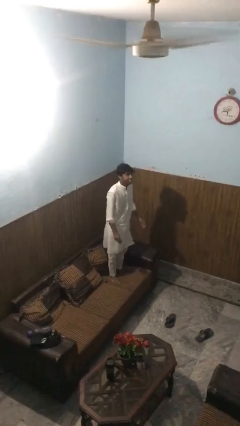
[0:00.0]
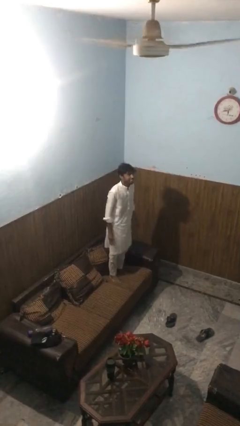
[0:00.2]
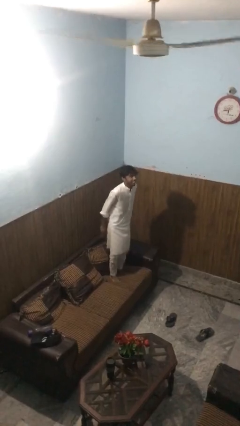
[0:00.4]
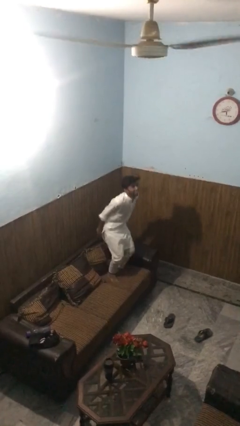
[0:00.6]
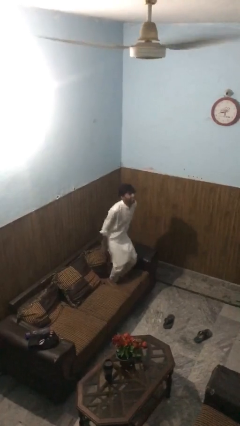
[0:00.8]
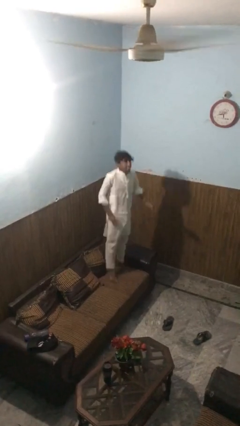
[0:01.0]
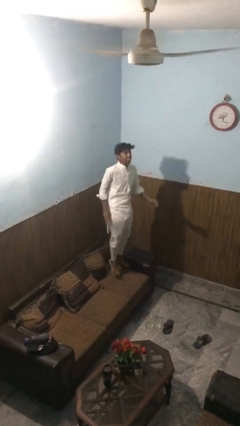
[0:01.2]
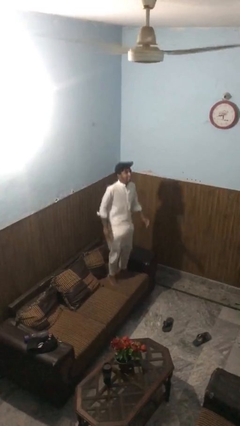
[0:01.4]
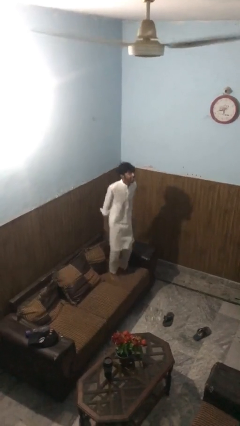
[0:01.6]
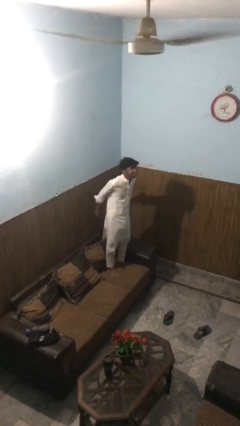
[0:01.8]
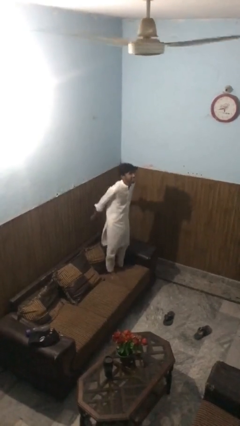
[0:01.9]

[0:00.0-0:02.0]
person jumps on couch

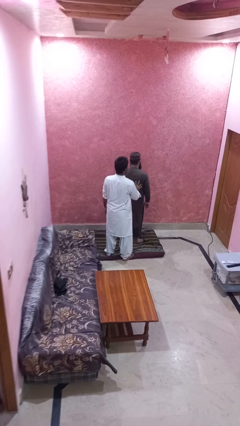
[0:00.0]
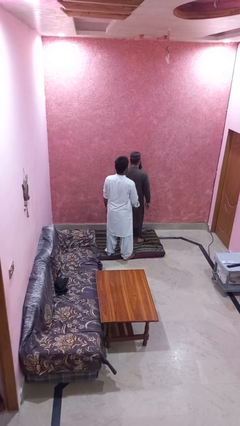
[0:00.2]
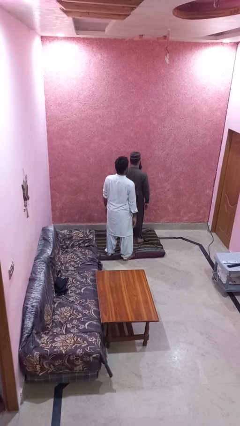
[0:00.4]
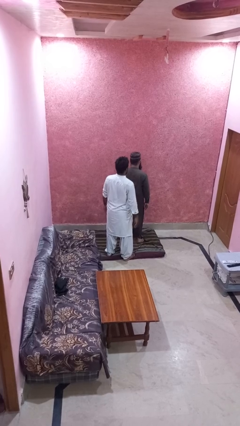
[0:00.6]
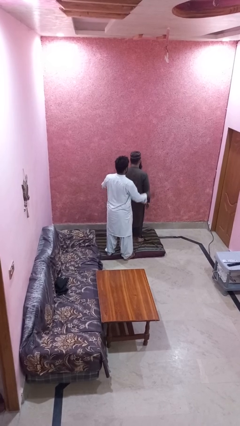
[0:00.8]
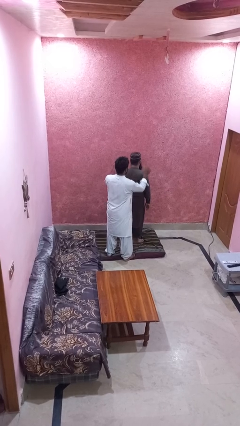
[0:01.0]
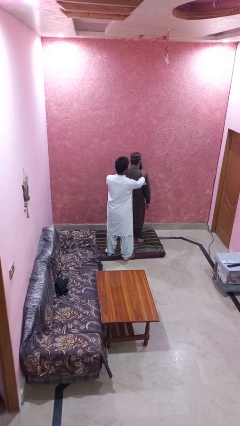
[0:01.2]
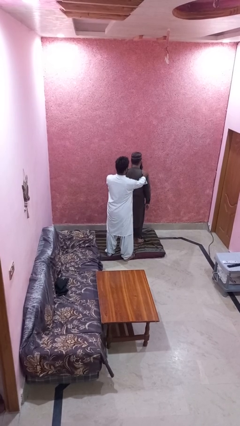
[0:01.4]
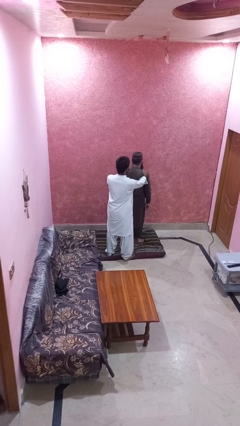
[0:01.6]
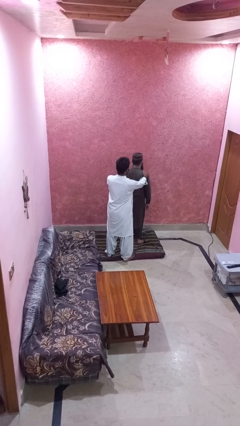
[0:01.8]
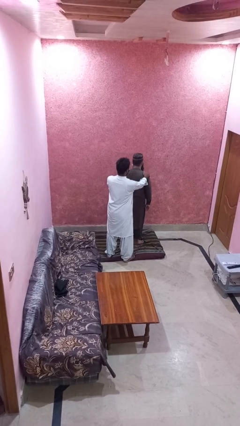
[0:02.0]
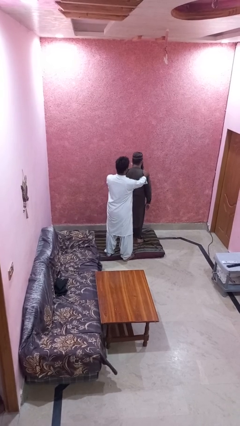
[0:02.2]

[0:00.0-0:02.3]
person grabs person by shoulder

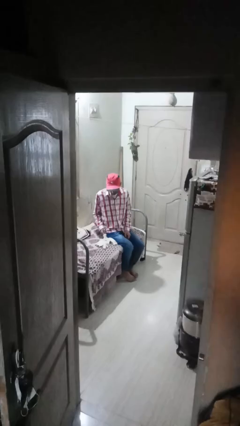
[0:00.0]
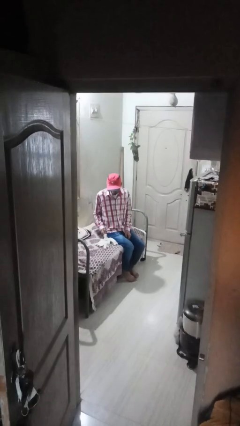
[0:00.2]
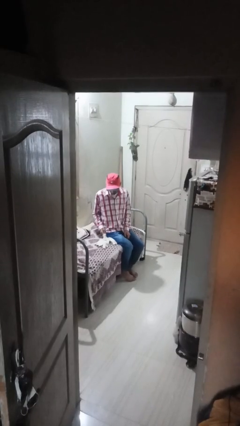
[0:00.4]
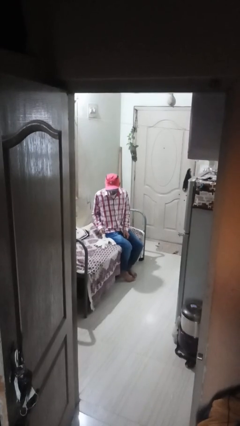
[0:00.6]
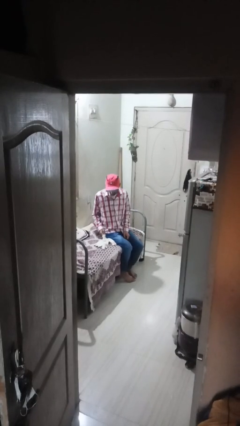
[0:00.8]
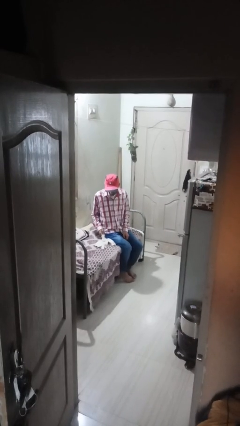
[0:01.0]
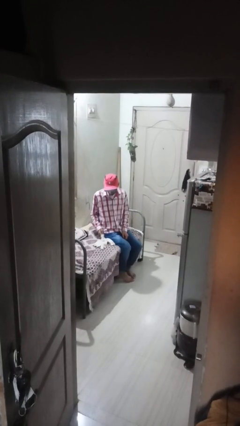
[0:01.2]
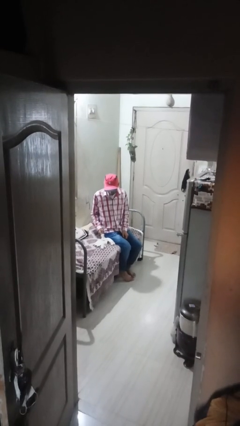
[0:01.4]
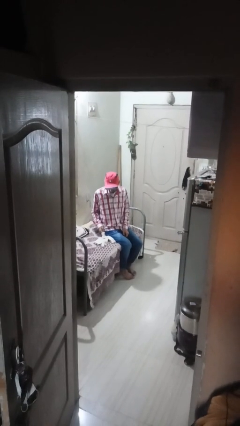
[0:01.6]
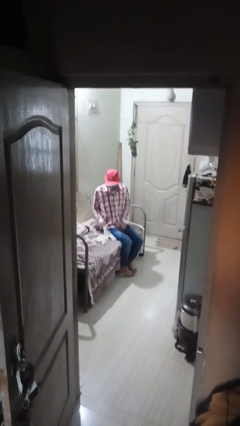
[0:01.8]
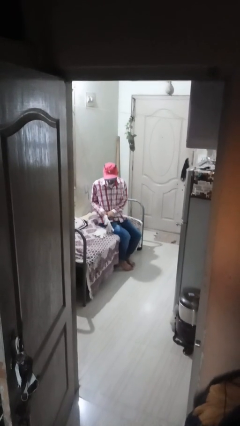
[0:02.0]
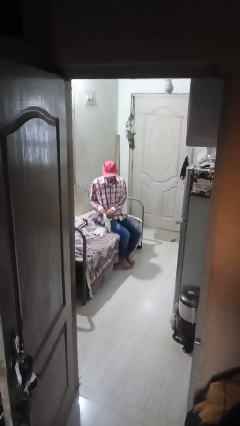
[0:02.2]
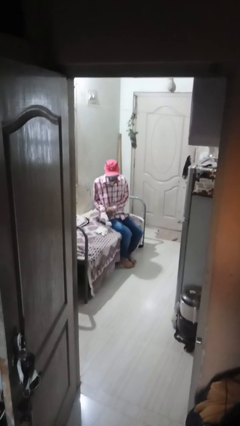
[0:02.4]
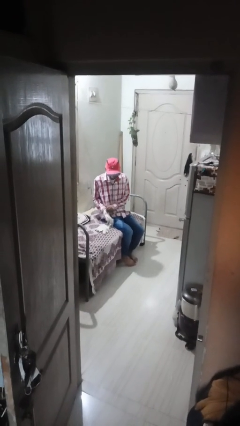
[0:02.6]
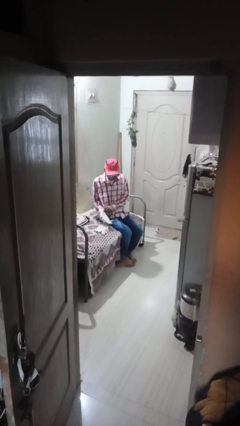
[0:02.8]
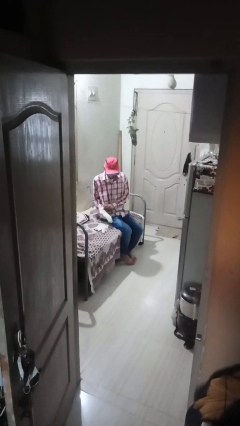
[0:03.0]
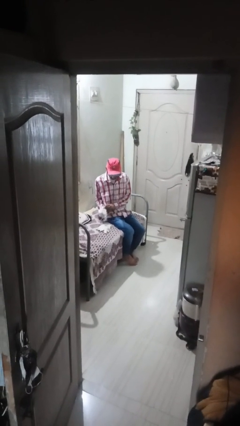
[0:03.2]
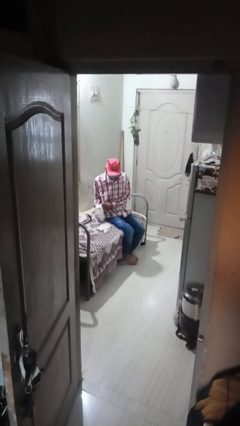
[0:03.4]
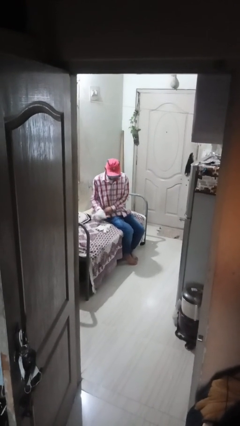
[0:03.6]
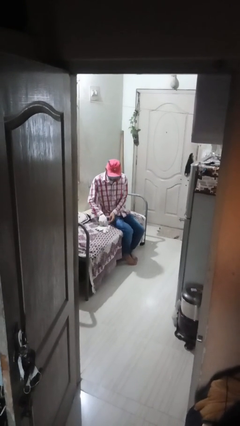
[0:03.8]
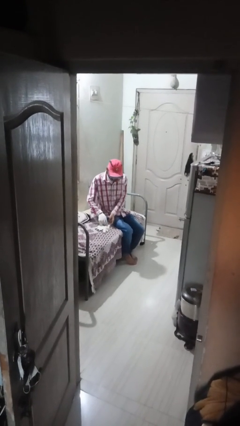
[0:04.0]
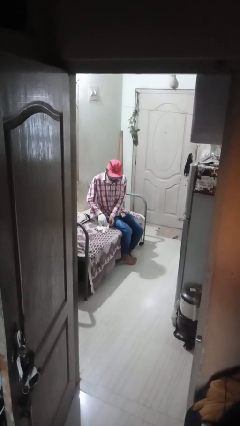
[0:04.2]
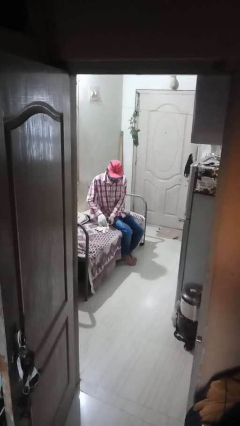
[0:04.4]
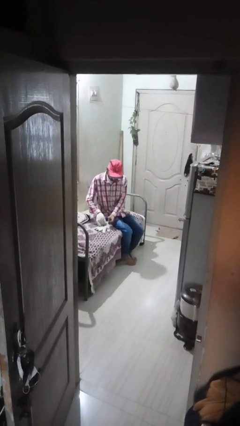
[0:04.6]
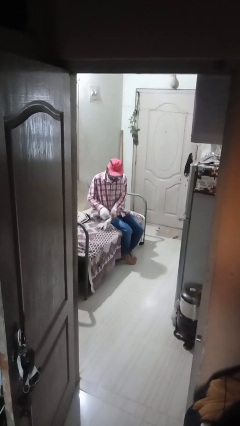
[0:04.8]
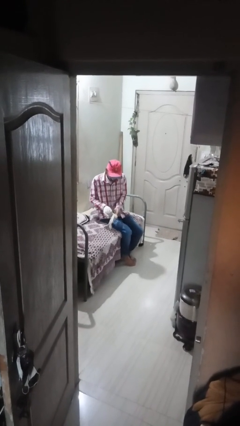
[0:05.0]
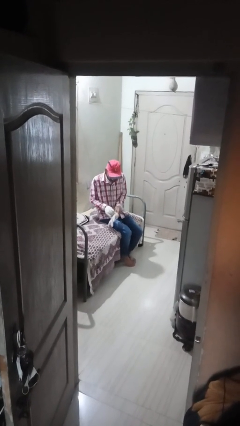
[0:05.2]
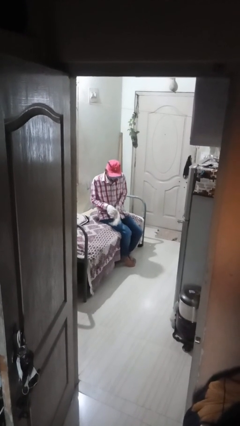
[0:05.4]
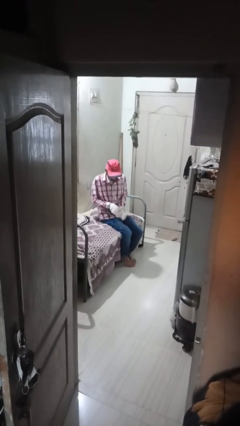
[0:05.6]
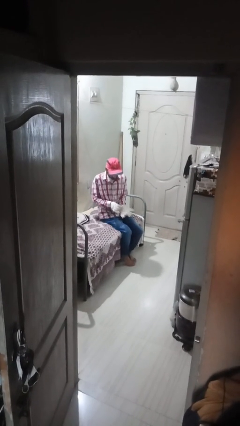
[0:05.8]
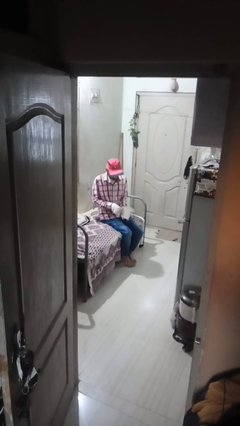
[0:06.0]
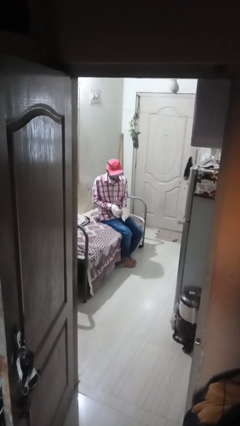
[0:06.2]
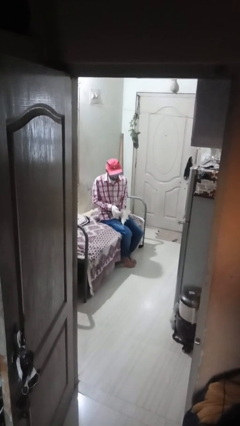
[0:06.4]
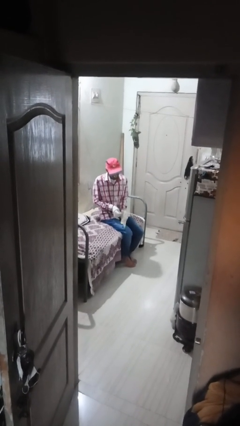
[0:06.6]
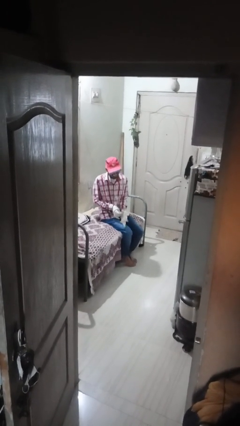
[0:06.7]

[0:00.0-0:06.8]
person puts on gloves

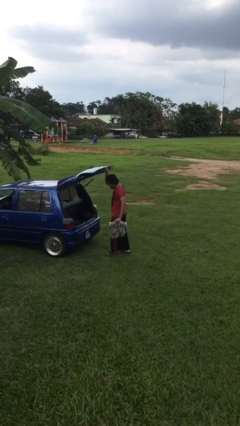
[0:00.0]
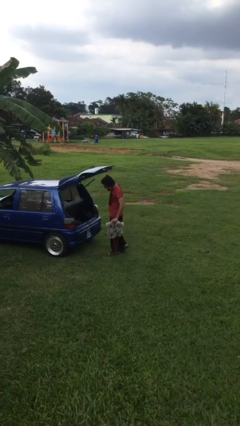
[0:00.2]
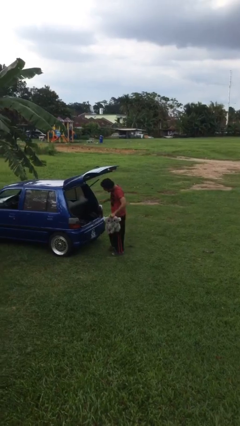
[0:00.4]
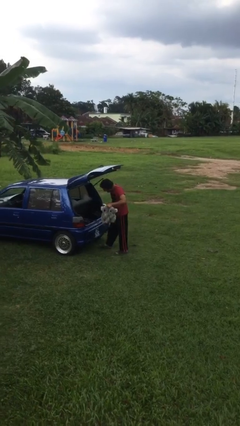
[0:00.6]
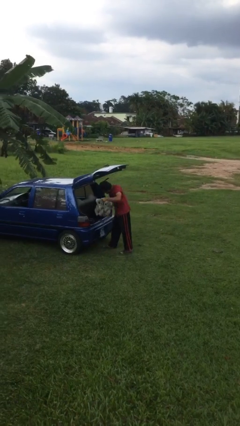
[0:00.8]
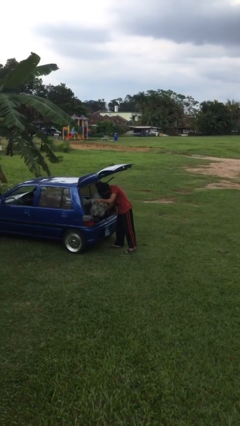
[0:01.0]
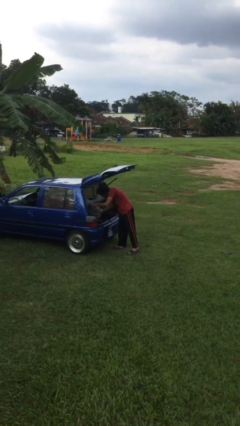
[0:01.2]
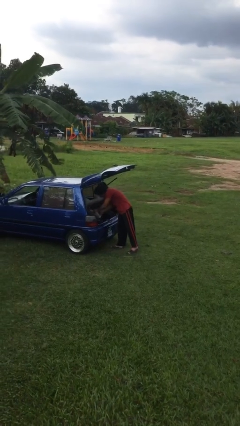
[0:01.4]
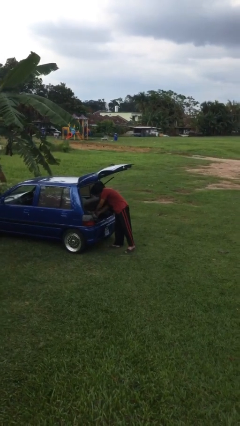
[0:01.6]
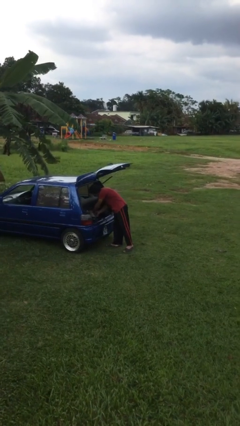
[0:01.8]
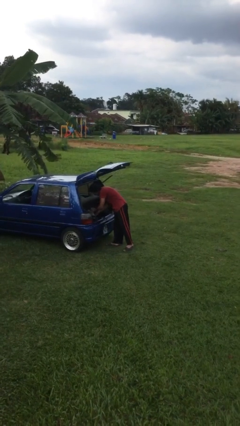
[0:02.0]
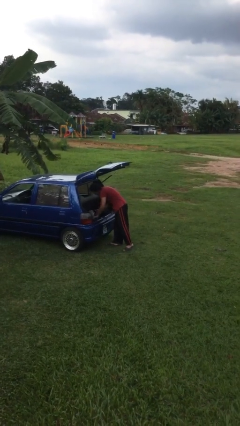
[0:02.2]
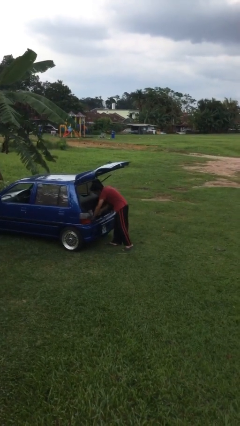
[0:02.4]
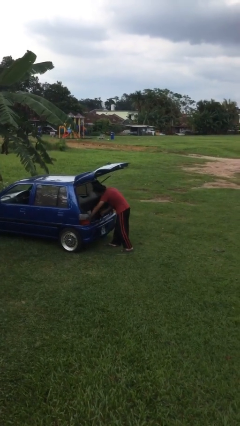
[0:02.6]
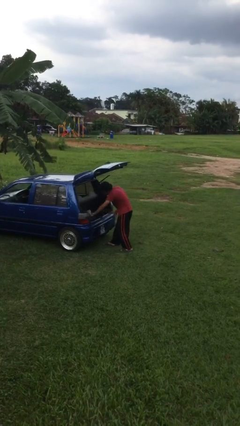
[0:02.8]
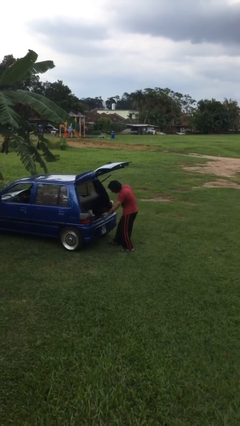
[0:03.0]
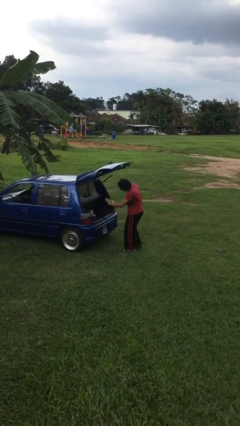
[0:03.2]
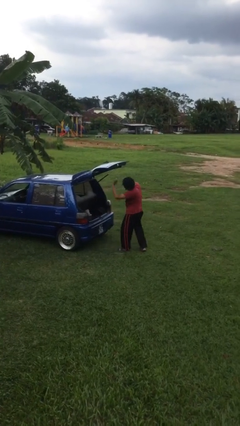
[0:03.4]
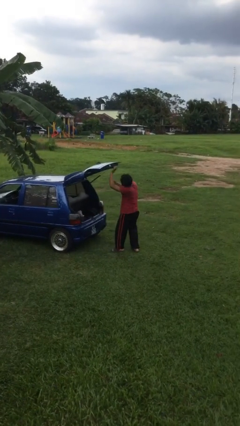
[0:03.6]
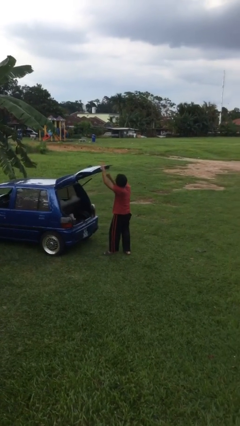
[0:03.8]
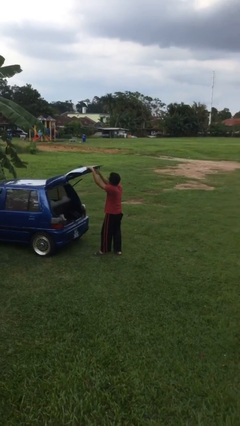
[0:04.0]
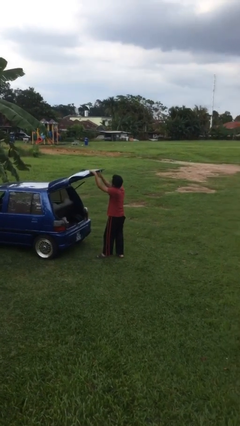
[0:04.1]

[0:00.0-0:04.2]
person loads car

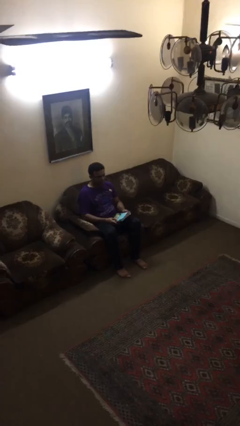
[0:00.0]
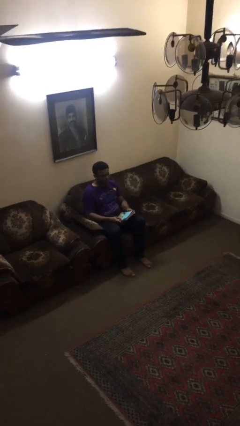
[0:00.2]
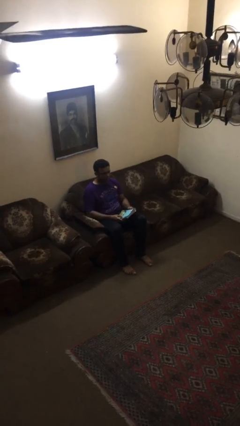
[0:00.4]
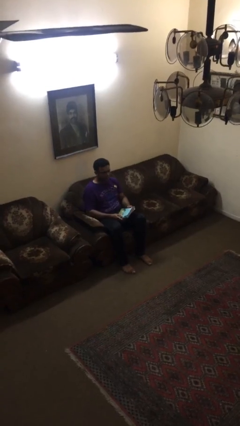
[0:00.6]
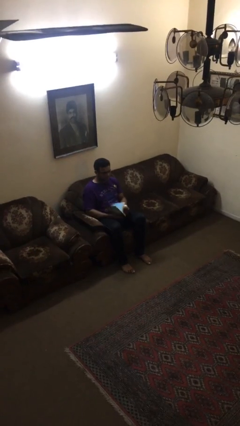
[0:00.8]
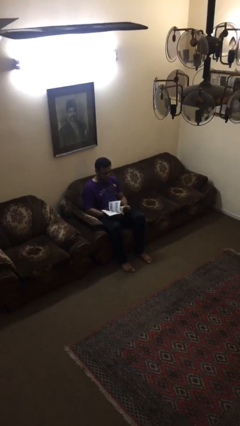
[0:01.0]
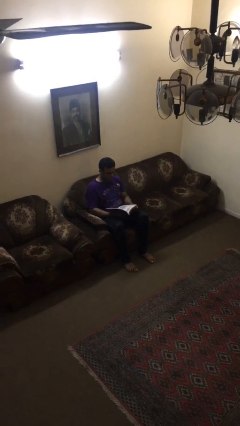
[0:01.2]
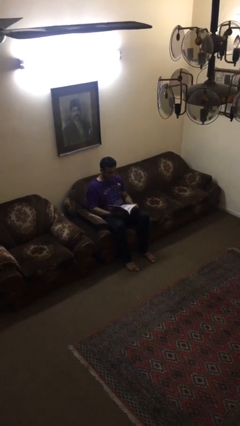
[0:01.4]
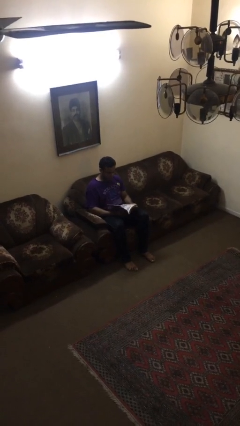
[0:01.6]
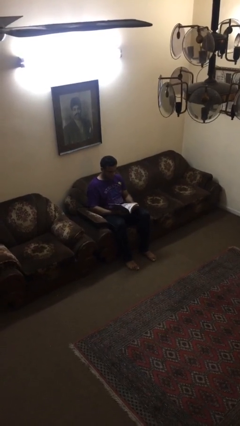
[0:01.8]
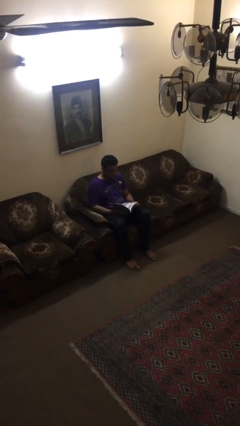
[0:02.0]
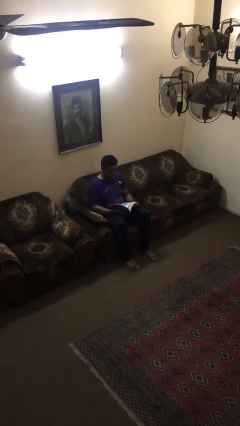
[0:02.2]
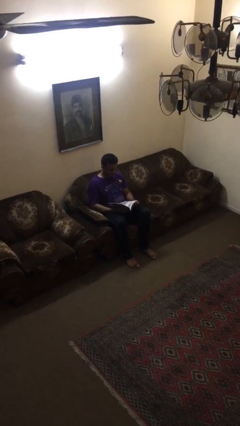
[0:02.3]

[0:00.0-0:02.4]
person reads document

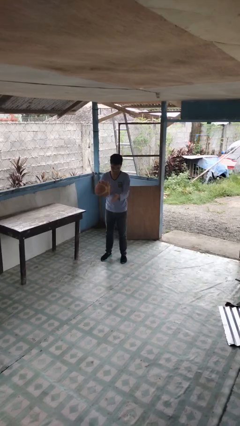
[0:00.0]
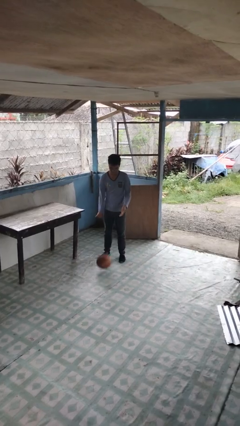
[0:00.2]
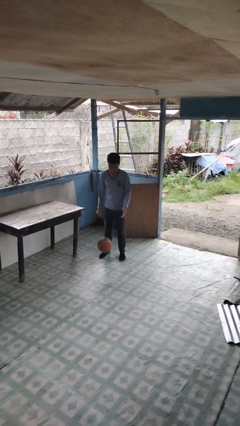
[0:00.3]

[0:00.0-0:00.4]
person bounces ball on floor
